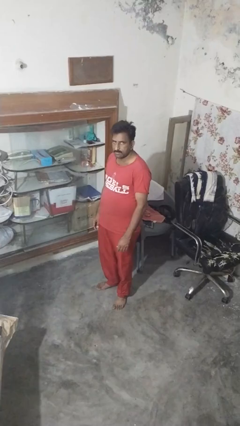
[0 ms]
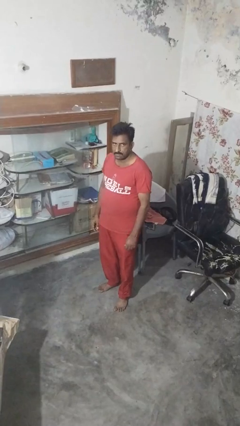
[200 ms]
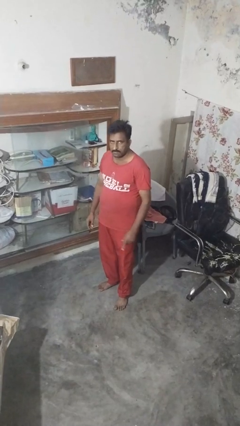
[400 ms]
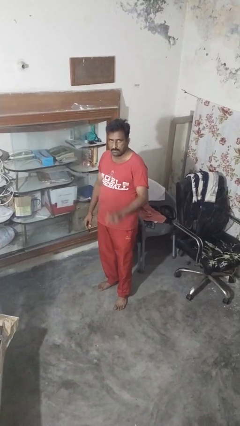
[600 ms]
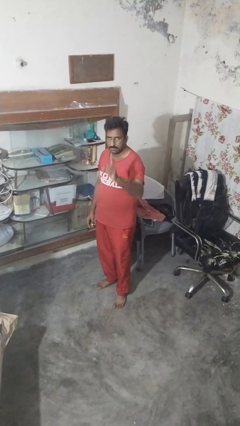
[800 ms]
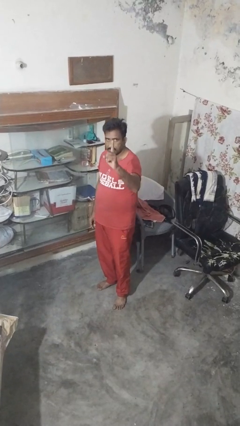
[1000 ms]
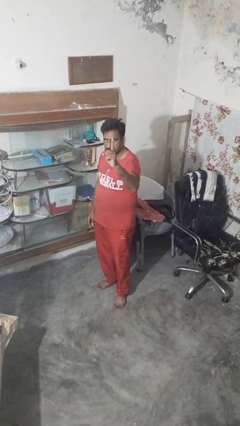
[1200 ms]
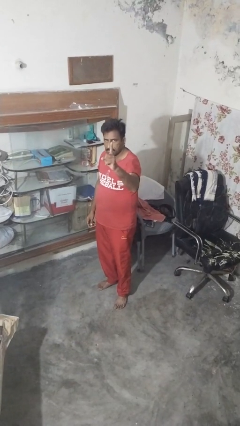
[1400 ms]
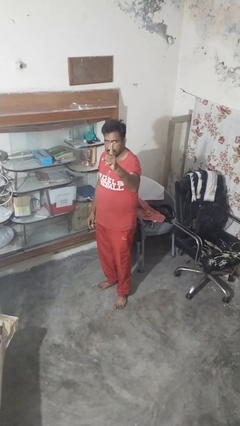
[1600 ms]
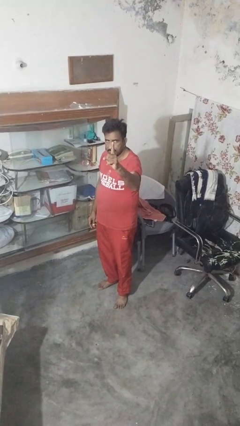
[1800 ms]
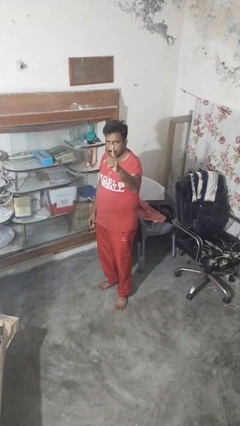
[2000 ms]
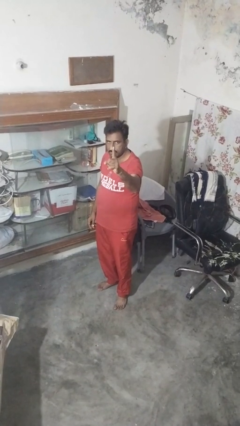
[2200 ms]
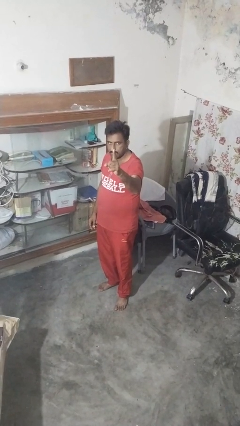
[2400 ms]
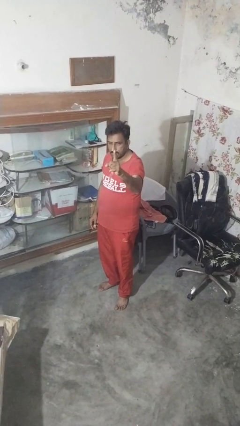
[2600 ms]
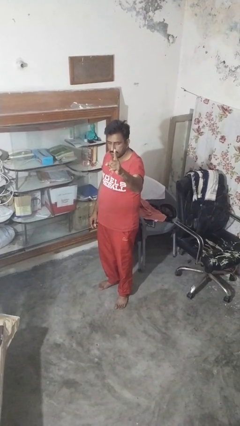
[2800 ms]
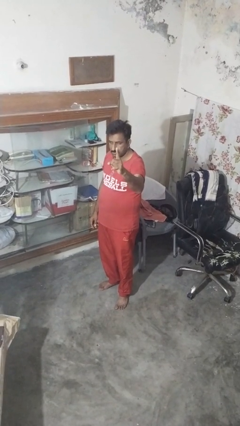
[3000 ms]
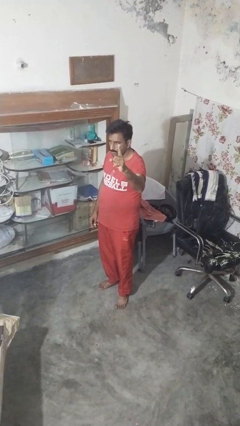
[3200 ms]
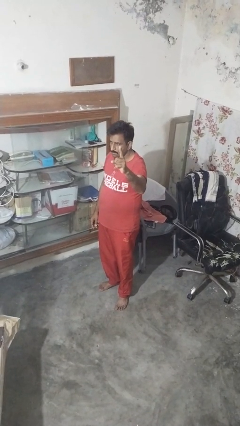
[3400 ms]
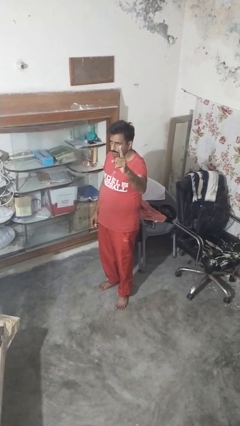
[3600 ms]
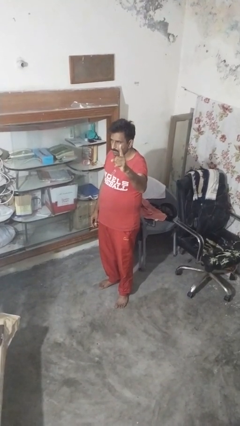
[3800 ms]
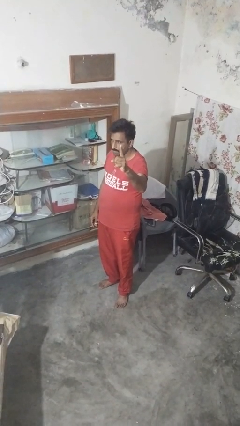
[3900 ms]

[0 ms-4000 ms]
person gestures number one

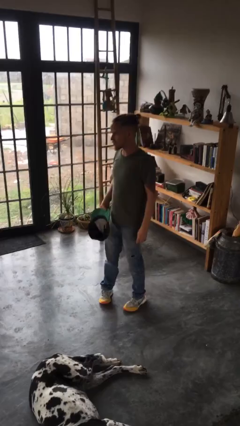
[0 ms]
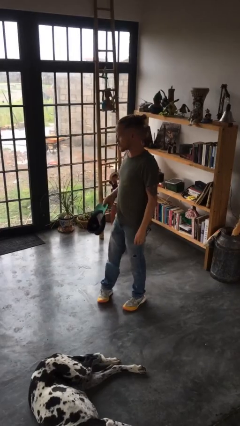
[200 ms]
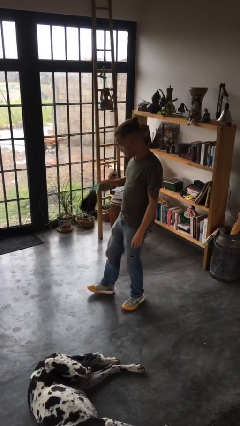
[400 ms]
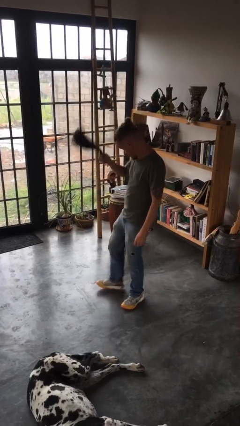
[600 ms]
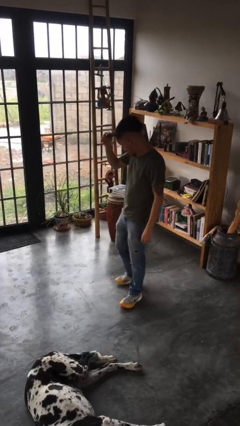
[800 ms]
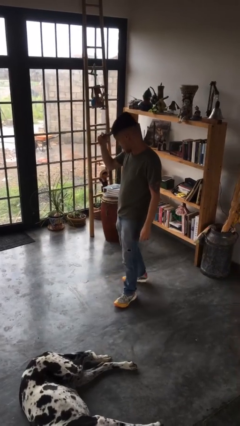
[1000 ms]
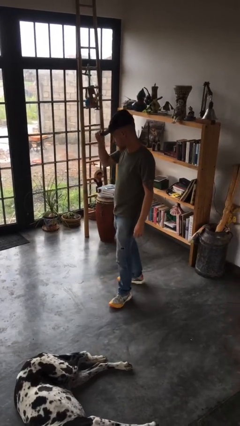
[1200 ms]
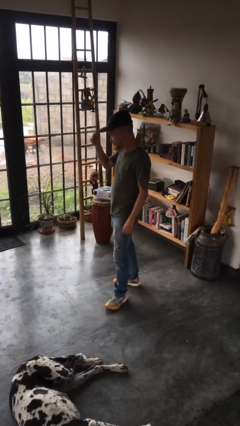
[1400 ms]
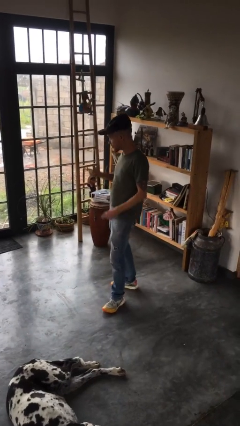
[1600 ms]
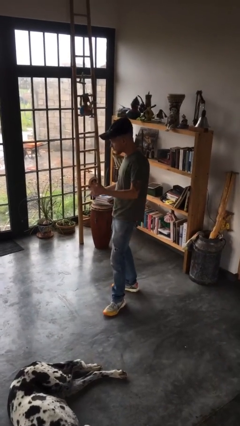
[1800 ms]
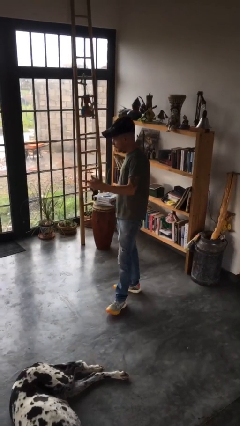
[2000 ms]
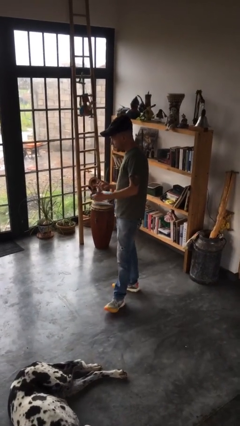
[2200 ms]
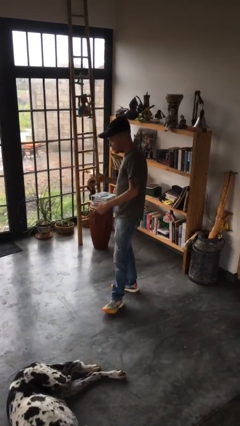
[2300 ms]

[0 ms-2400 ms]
person puts on hat

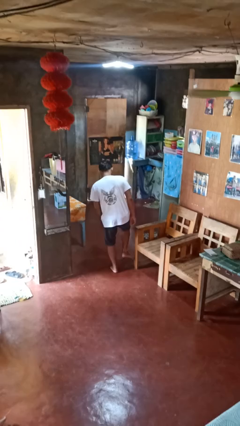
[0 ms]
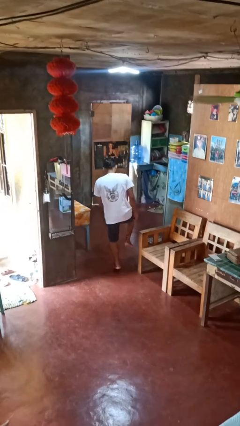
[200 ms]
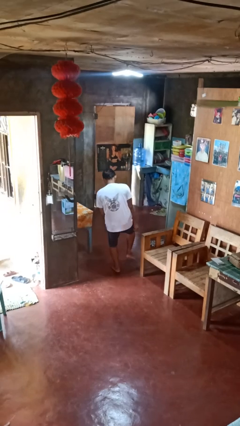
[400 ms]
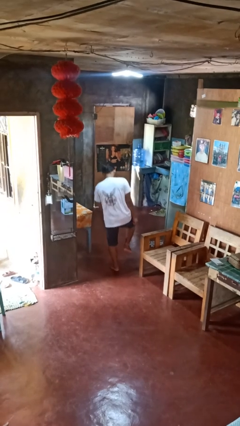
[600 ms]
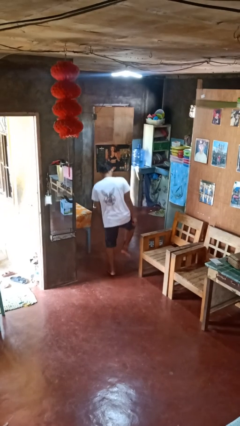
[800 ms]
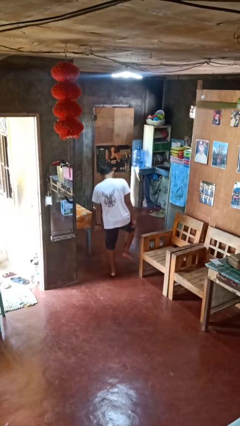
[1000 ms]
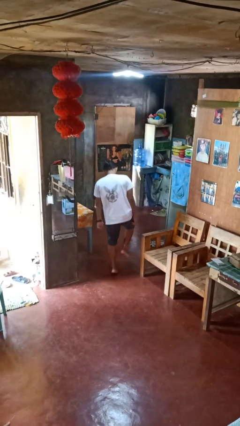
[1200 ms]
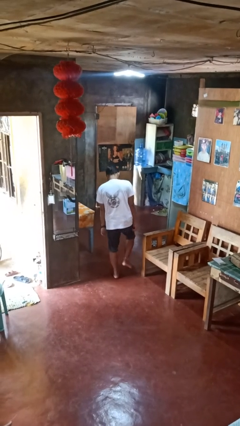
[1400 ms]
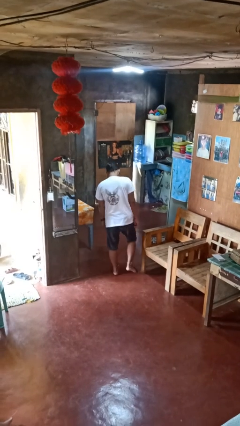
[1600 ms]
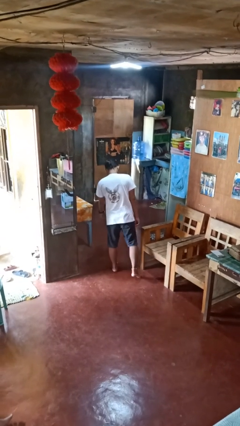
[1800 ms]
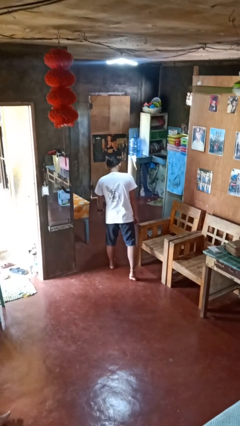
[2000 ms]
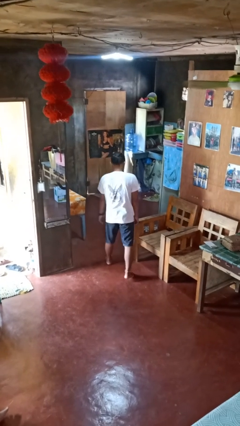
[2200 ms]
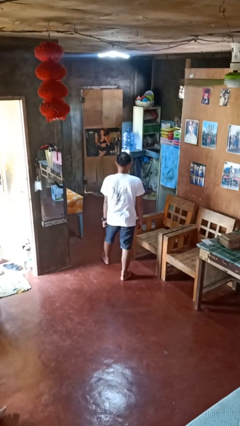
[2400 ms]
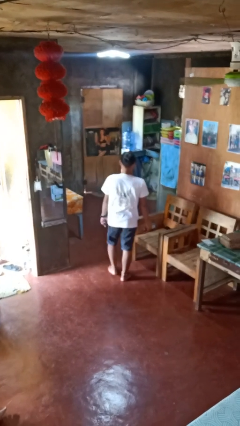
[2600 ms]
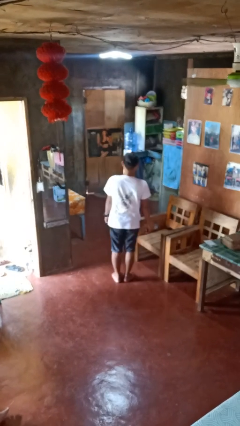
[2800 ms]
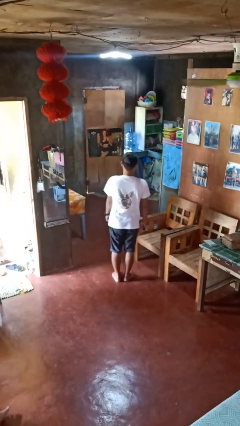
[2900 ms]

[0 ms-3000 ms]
person stubs toe

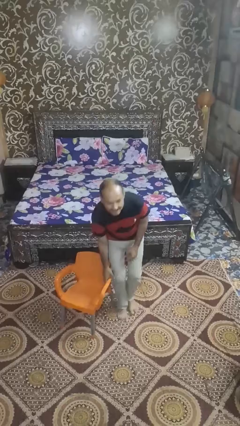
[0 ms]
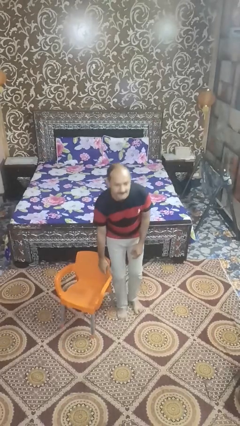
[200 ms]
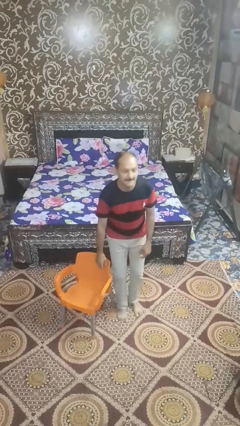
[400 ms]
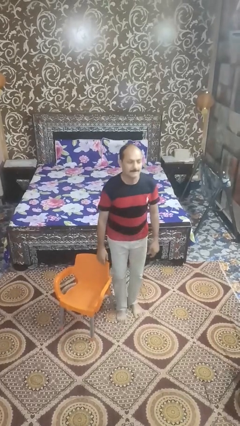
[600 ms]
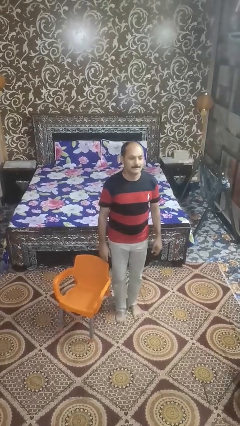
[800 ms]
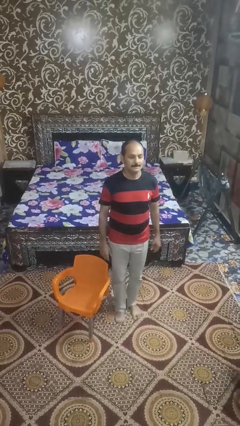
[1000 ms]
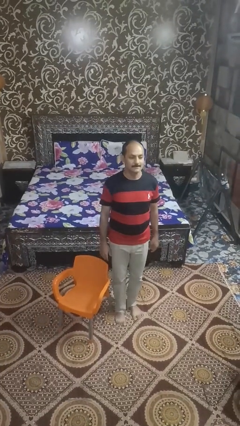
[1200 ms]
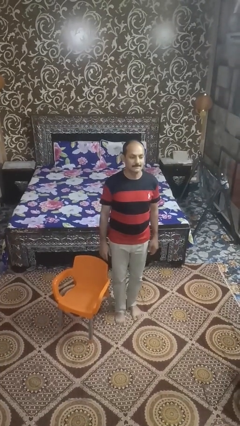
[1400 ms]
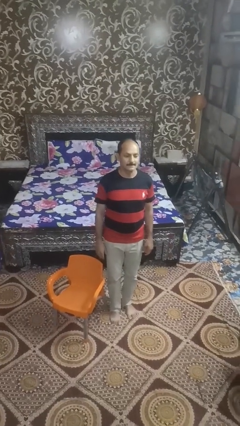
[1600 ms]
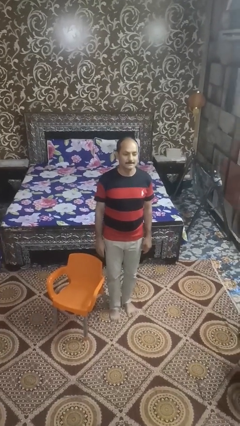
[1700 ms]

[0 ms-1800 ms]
person stands up from floor

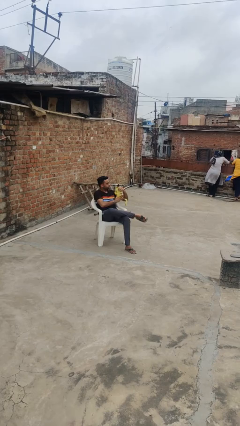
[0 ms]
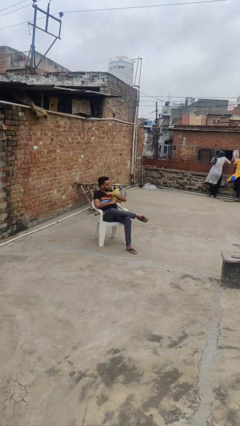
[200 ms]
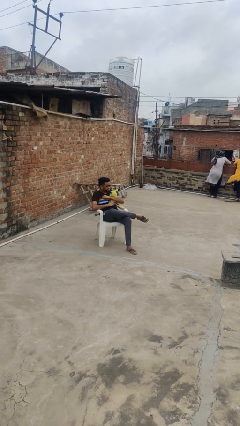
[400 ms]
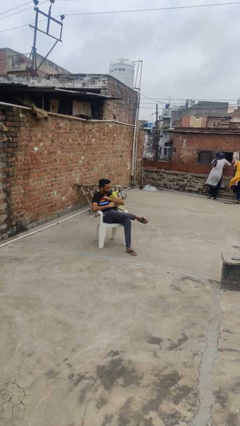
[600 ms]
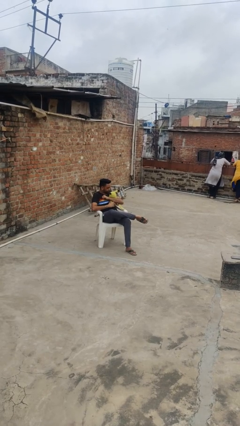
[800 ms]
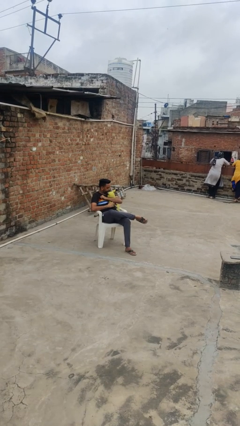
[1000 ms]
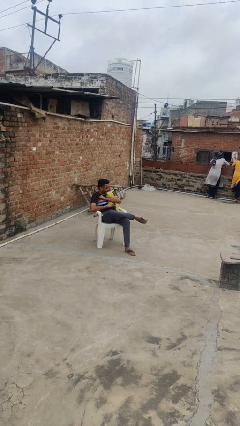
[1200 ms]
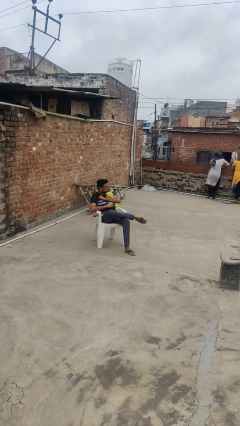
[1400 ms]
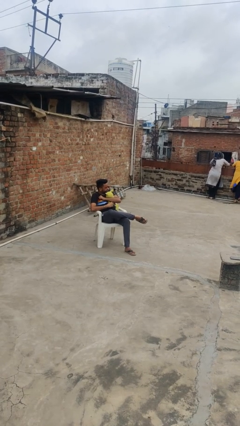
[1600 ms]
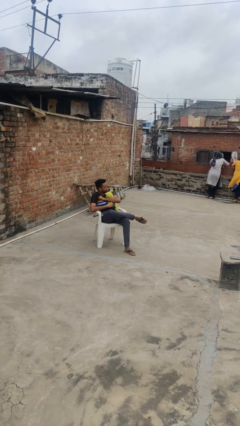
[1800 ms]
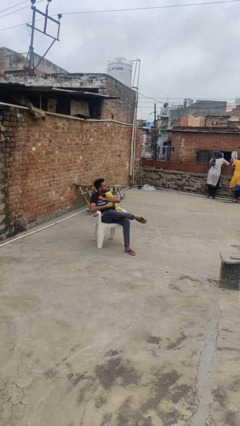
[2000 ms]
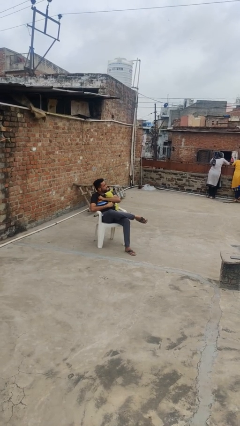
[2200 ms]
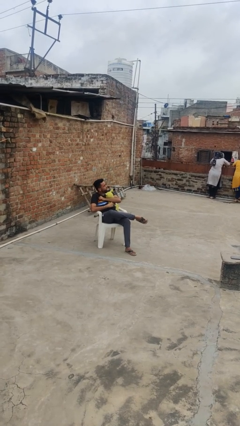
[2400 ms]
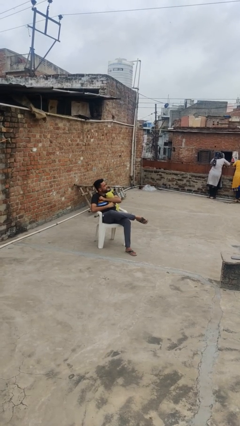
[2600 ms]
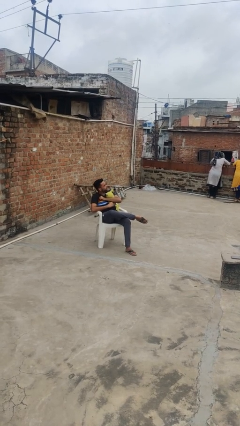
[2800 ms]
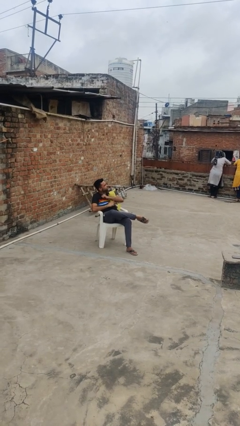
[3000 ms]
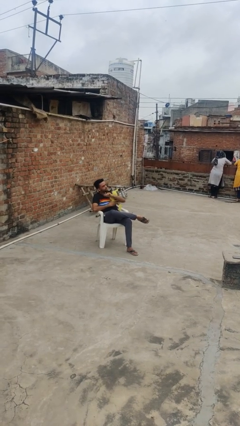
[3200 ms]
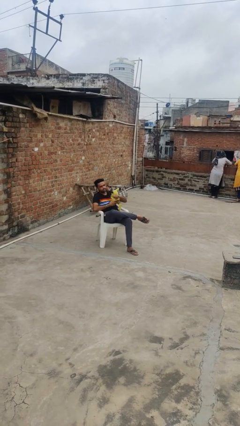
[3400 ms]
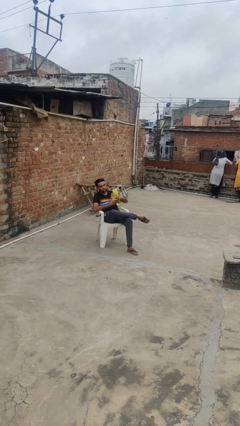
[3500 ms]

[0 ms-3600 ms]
person hugs stuffed animal

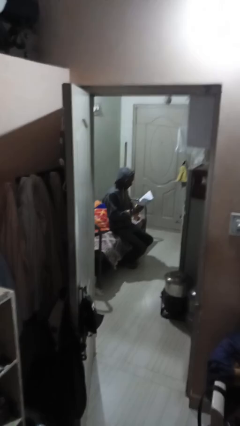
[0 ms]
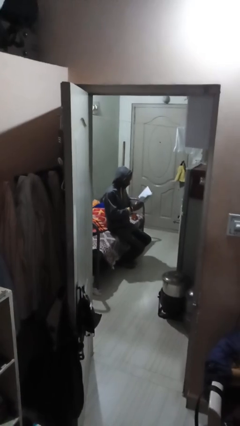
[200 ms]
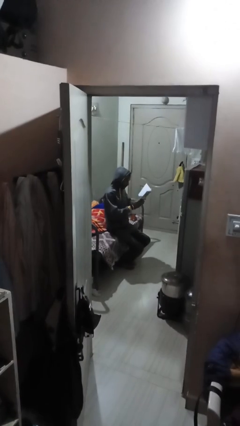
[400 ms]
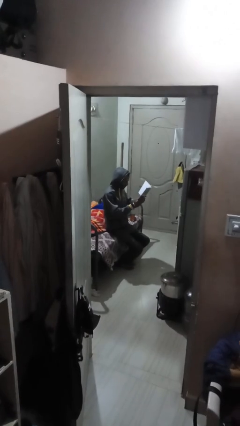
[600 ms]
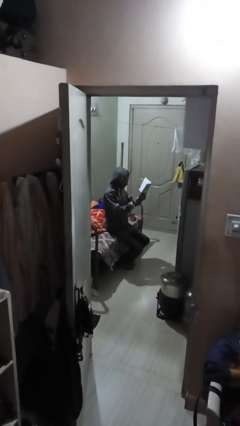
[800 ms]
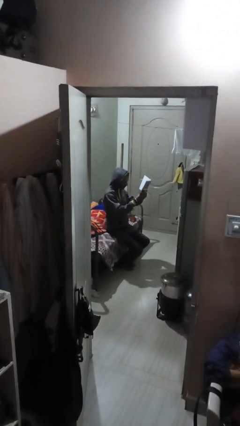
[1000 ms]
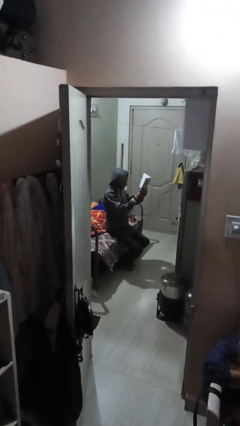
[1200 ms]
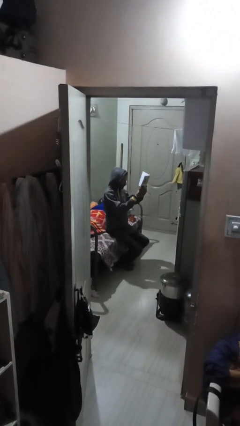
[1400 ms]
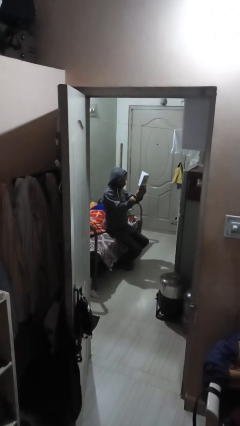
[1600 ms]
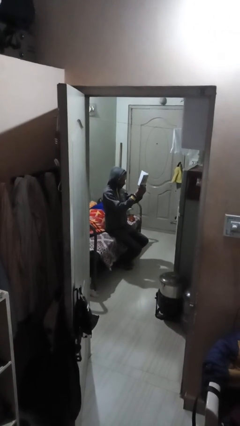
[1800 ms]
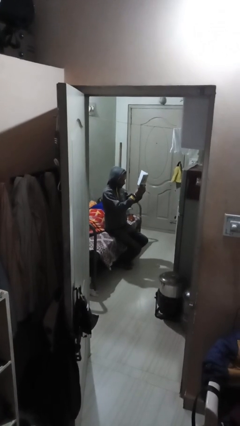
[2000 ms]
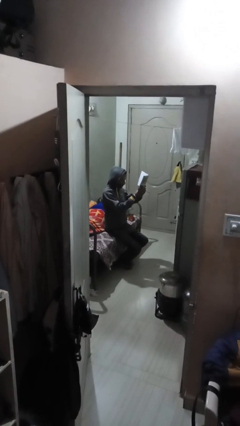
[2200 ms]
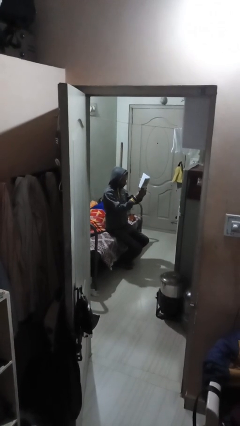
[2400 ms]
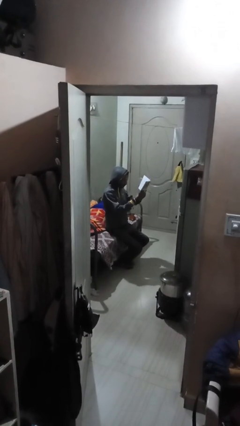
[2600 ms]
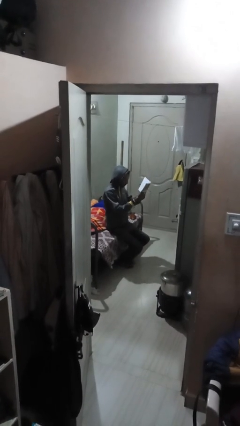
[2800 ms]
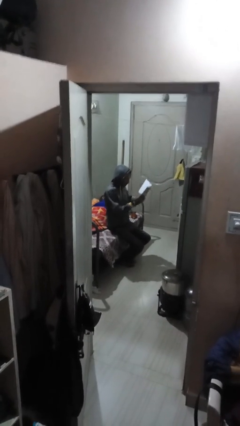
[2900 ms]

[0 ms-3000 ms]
person reads document
